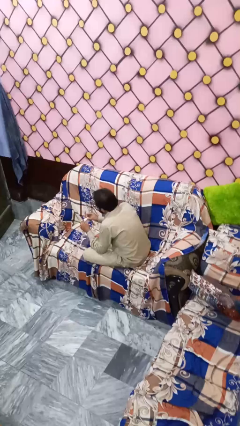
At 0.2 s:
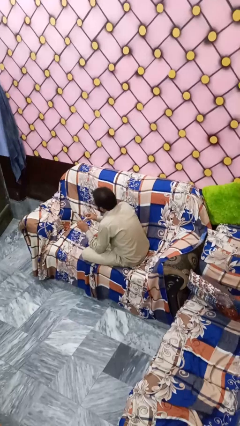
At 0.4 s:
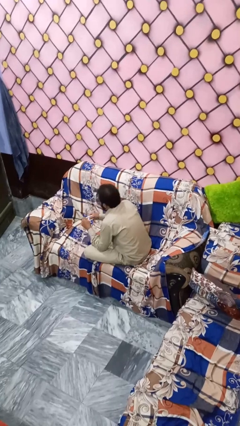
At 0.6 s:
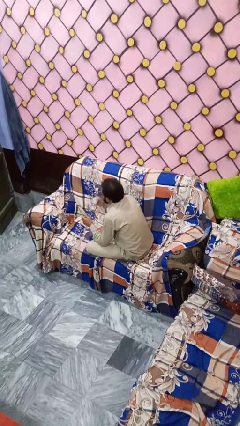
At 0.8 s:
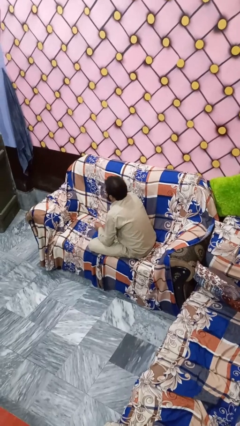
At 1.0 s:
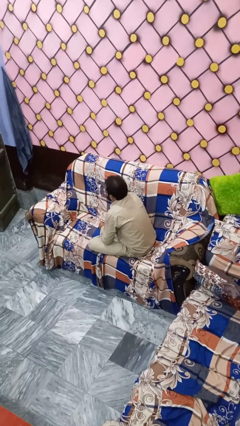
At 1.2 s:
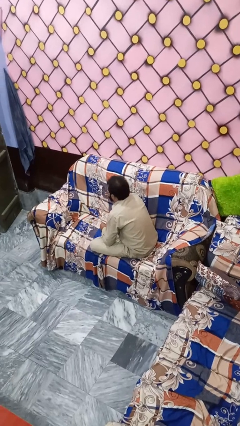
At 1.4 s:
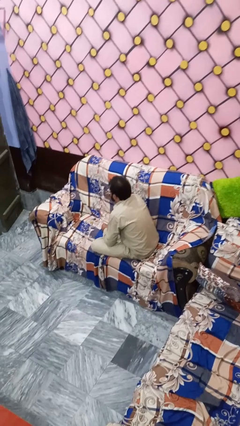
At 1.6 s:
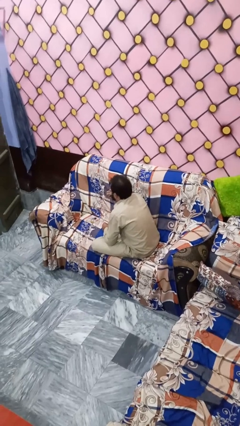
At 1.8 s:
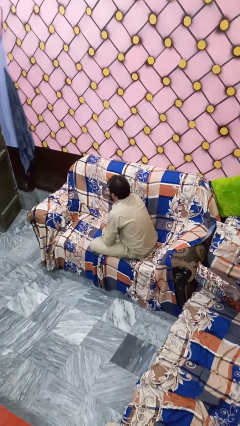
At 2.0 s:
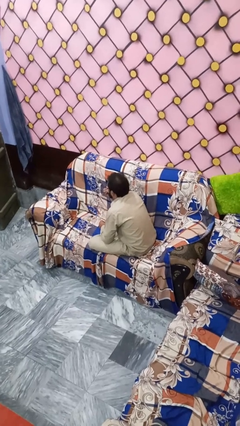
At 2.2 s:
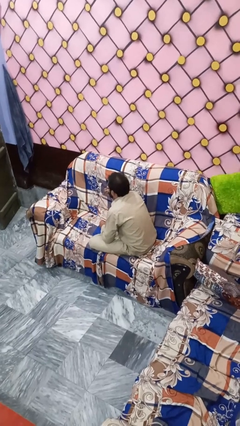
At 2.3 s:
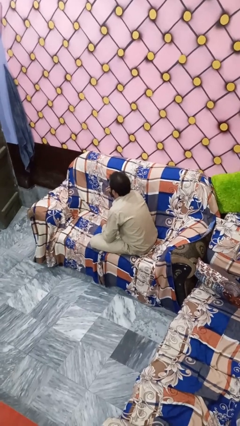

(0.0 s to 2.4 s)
person blows nose

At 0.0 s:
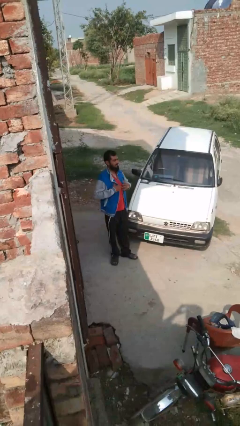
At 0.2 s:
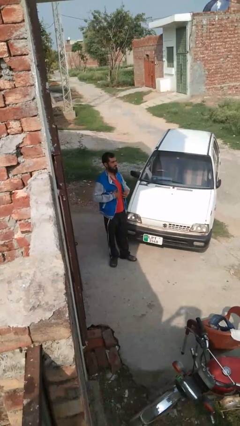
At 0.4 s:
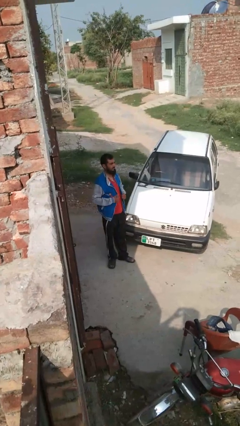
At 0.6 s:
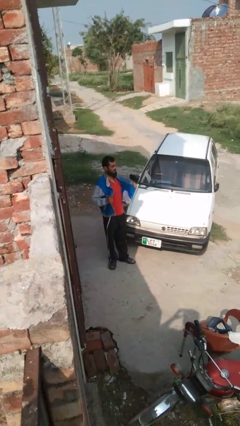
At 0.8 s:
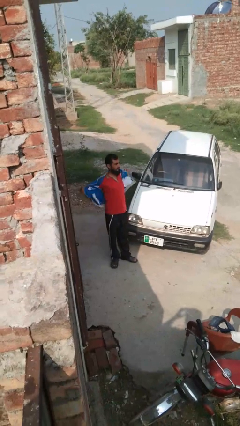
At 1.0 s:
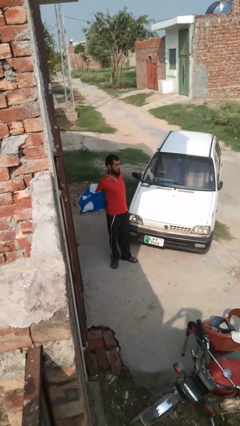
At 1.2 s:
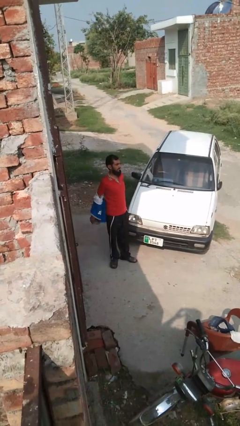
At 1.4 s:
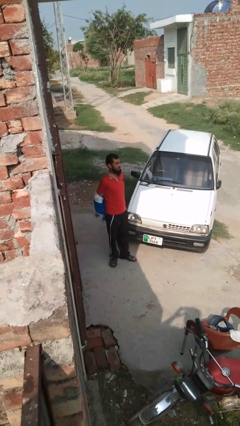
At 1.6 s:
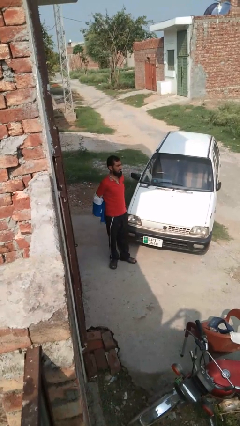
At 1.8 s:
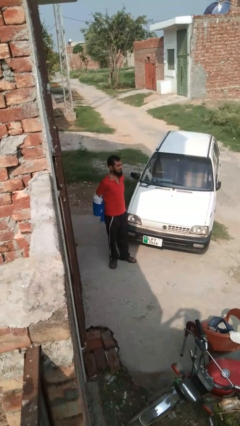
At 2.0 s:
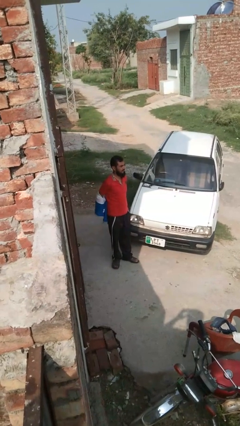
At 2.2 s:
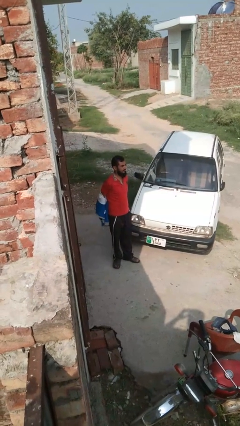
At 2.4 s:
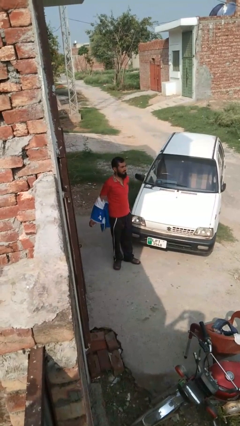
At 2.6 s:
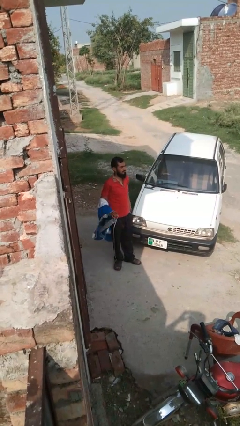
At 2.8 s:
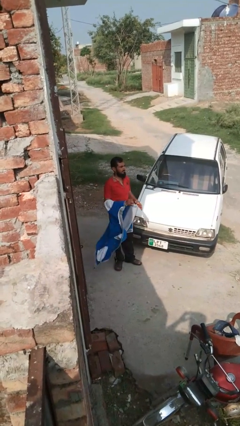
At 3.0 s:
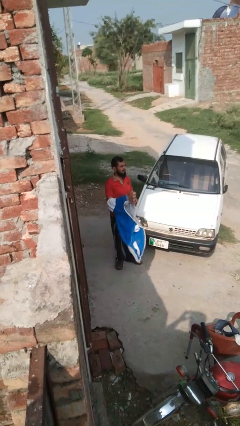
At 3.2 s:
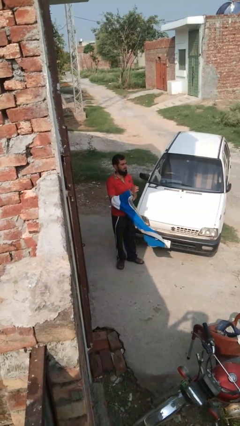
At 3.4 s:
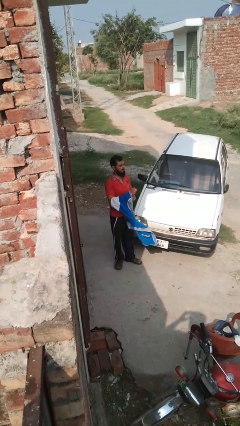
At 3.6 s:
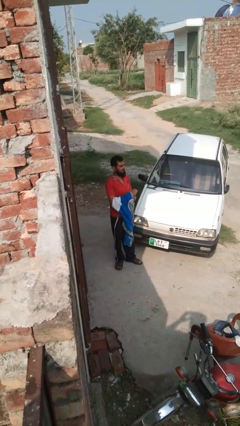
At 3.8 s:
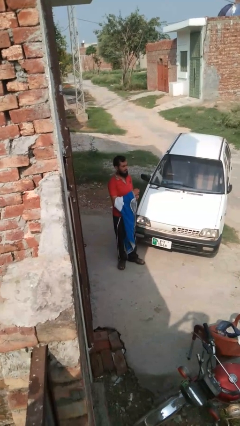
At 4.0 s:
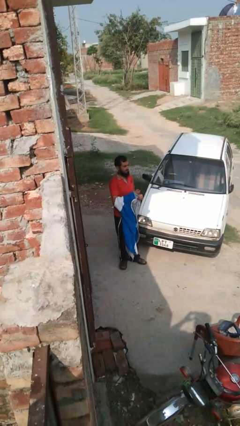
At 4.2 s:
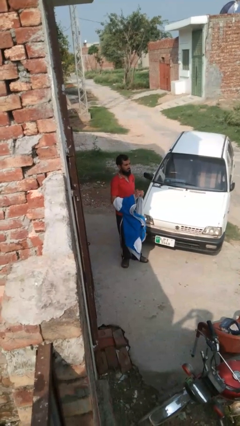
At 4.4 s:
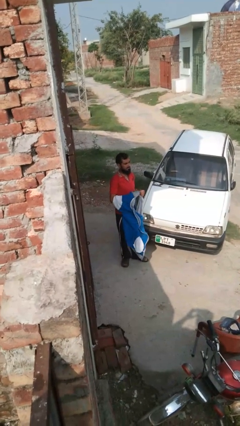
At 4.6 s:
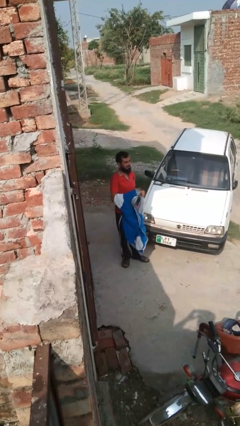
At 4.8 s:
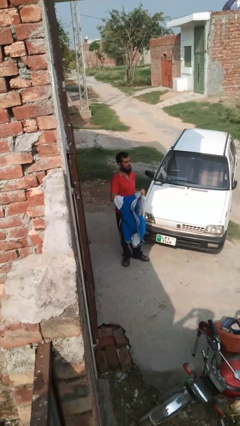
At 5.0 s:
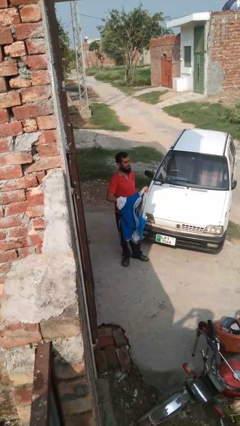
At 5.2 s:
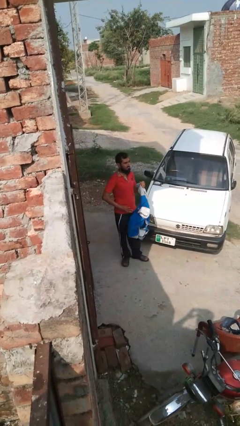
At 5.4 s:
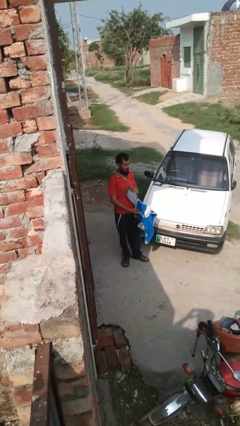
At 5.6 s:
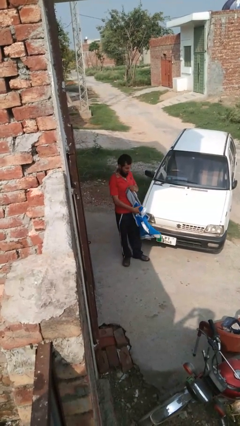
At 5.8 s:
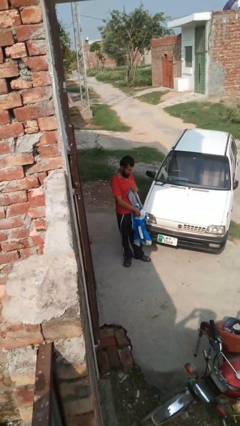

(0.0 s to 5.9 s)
person takes off jacket

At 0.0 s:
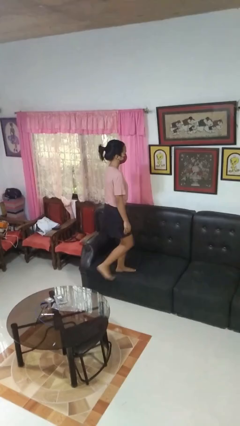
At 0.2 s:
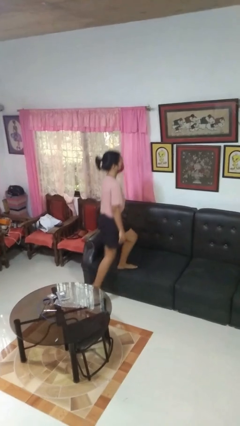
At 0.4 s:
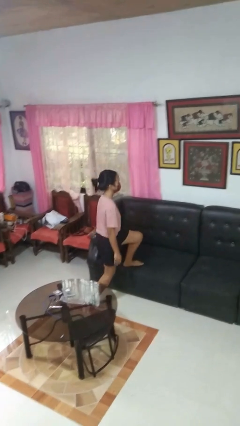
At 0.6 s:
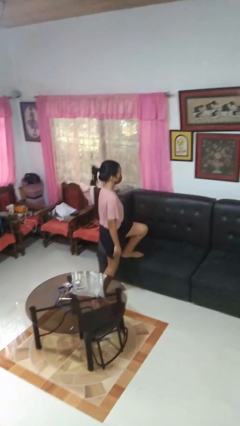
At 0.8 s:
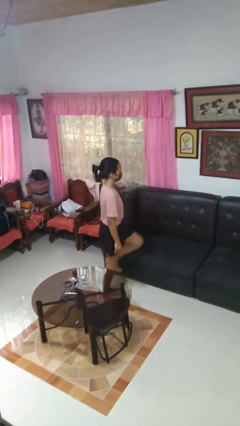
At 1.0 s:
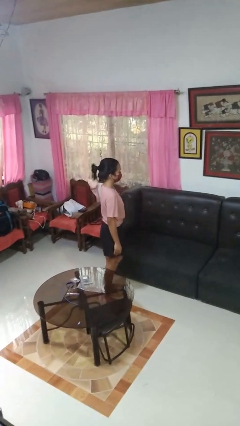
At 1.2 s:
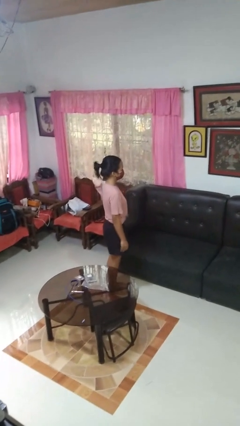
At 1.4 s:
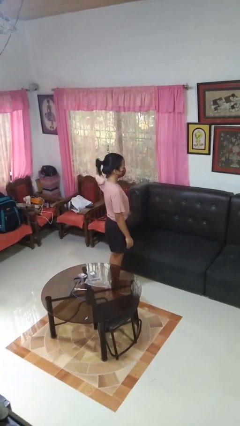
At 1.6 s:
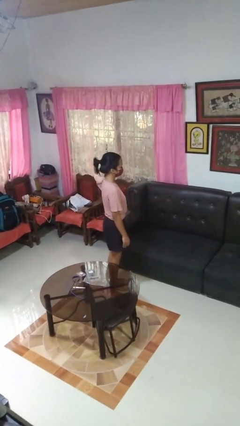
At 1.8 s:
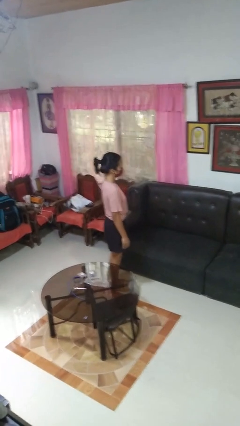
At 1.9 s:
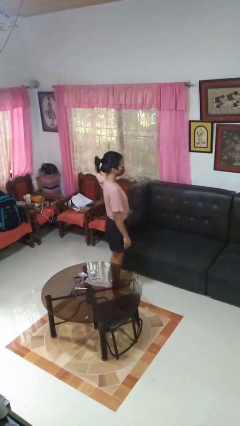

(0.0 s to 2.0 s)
person climbs off couch

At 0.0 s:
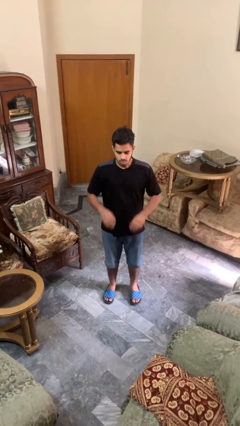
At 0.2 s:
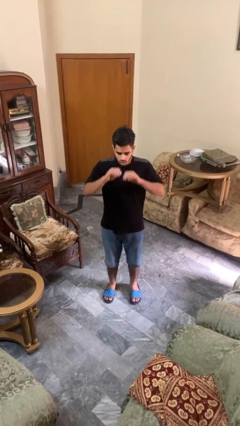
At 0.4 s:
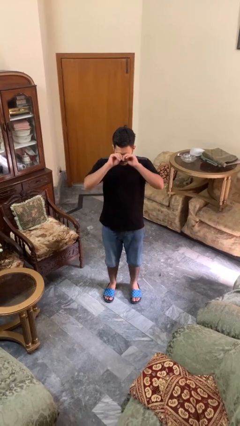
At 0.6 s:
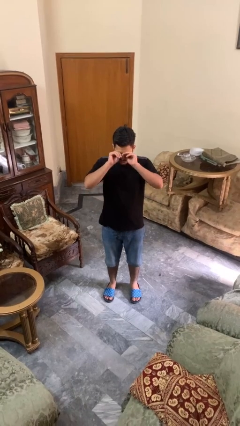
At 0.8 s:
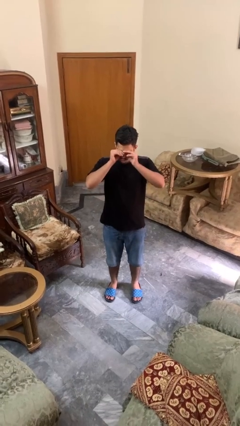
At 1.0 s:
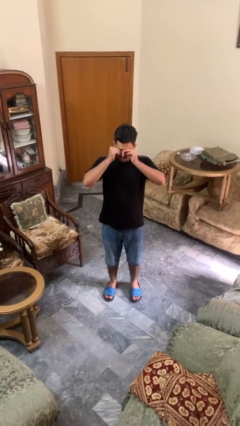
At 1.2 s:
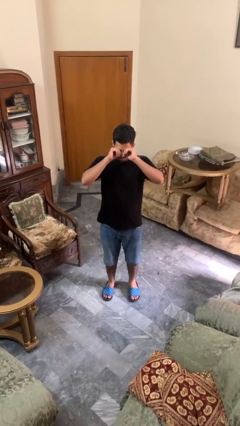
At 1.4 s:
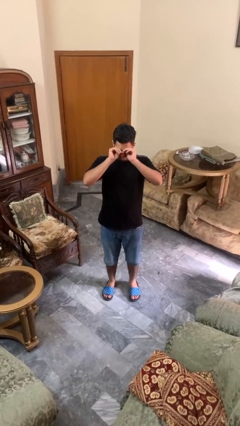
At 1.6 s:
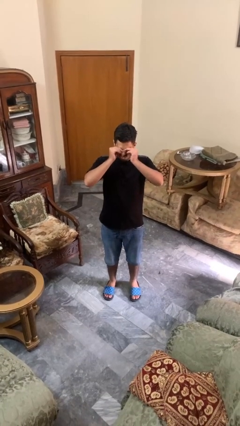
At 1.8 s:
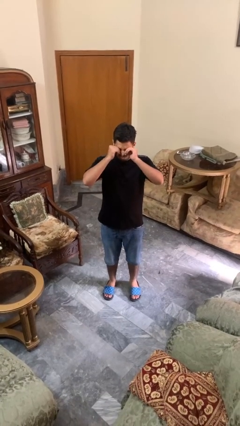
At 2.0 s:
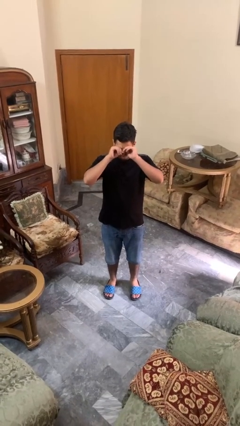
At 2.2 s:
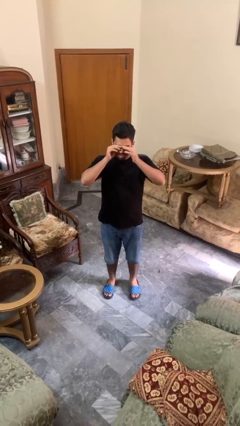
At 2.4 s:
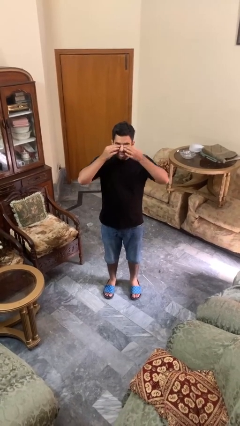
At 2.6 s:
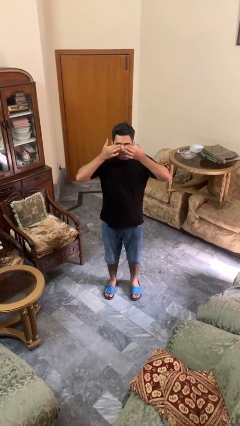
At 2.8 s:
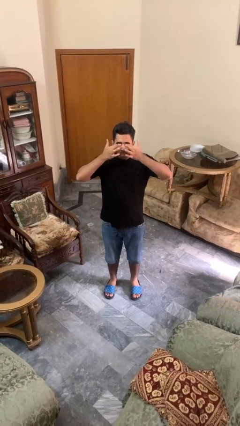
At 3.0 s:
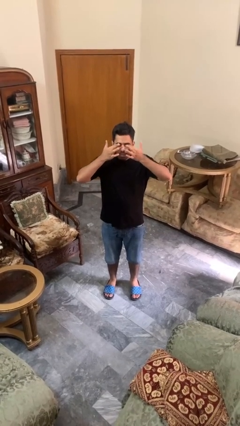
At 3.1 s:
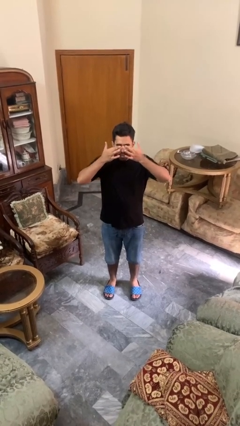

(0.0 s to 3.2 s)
person rubs eyes

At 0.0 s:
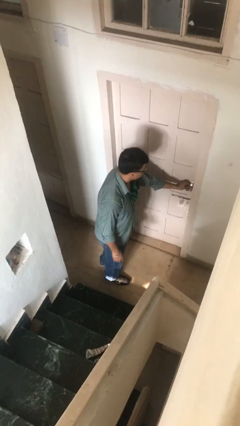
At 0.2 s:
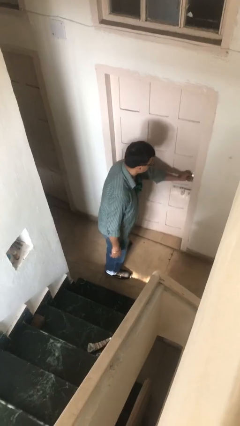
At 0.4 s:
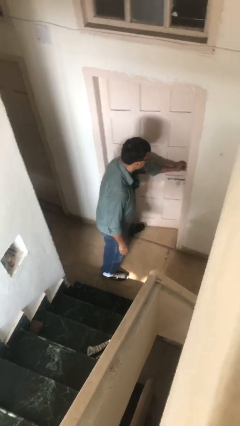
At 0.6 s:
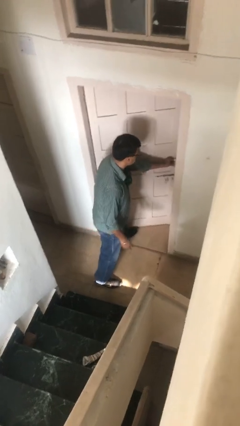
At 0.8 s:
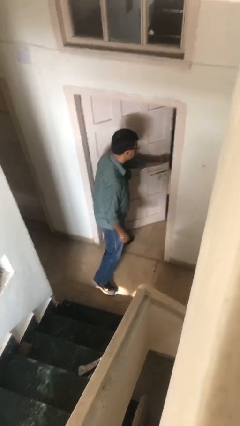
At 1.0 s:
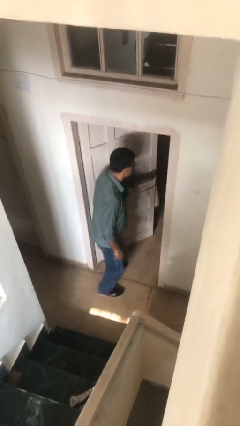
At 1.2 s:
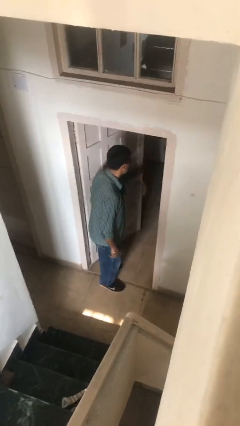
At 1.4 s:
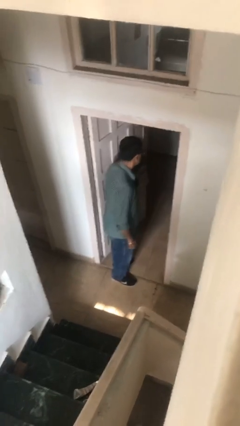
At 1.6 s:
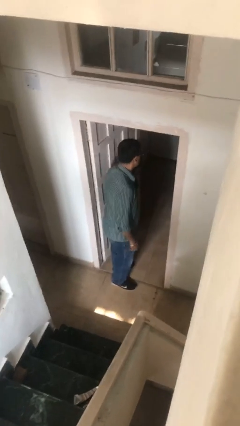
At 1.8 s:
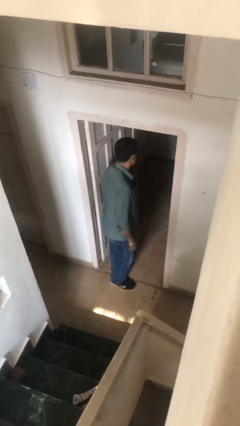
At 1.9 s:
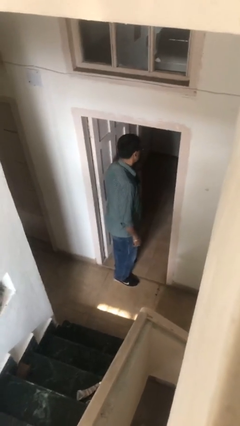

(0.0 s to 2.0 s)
person opens facility door

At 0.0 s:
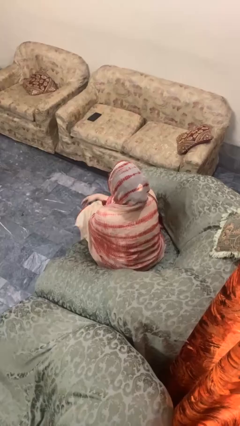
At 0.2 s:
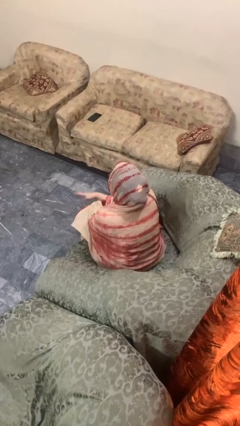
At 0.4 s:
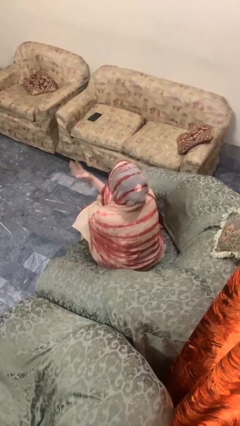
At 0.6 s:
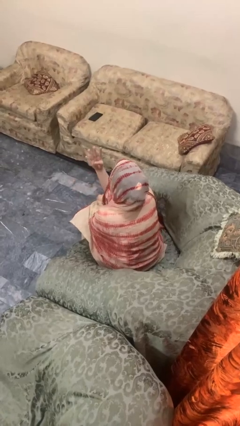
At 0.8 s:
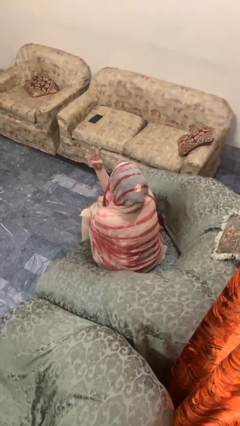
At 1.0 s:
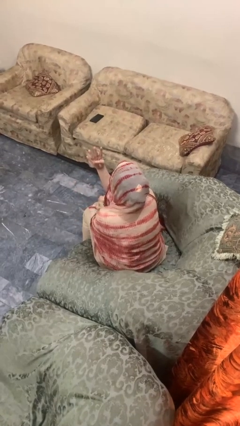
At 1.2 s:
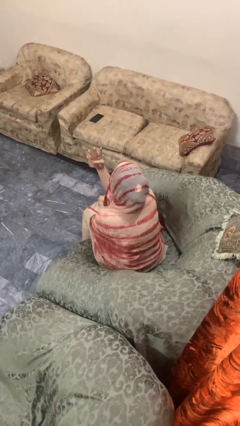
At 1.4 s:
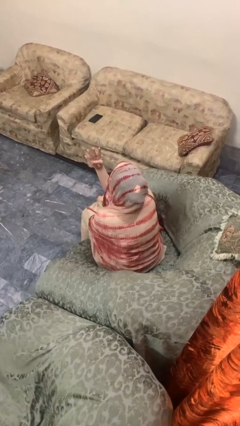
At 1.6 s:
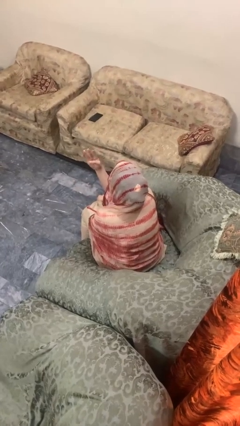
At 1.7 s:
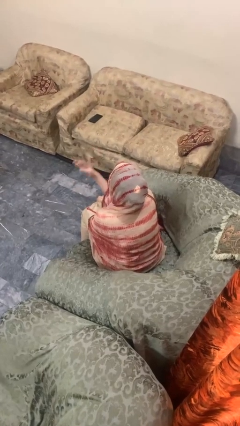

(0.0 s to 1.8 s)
person gestures number four

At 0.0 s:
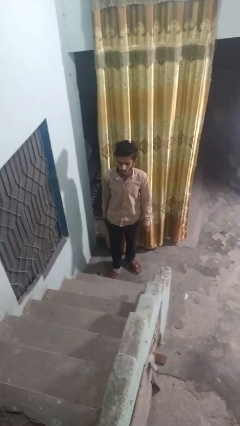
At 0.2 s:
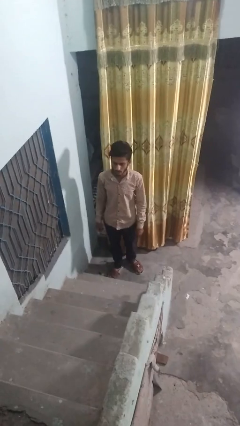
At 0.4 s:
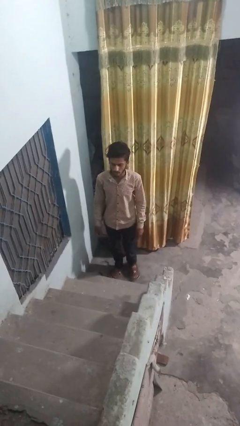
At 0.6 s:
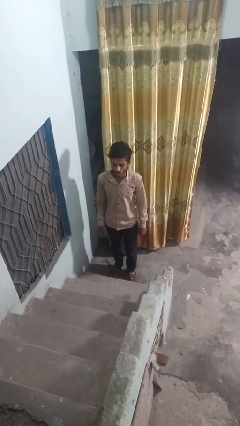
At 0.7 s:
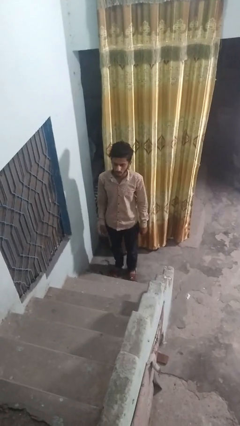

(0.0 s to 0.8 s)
person climbs down stairs
